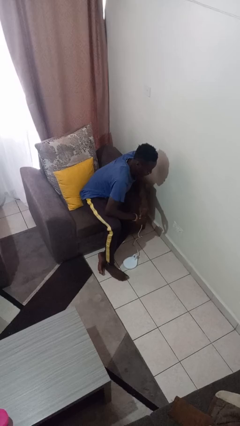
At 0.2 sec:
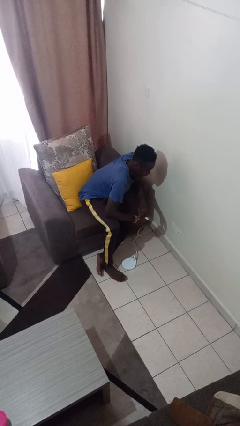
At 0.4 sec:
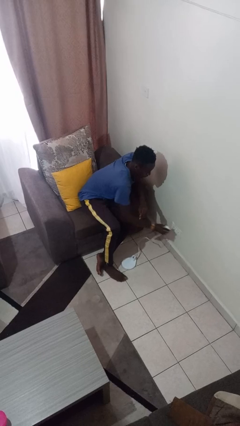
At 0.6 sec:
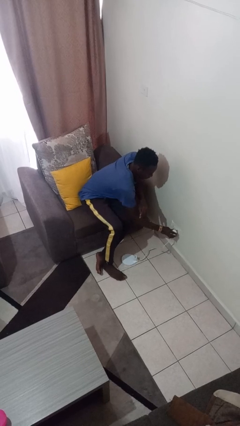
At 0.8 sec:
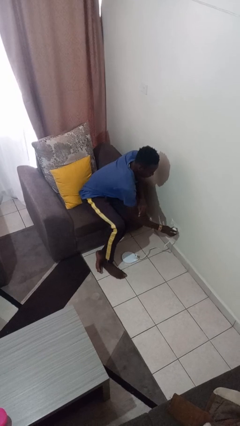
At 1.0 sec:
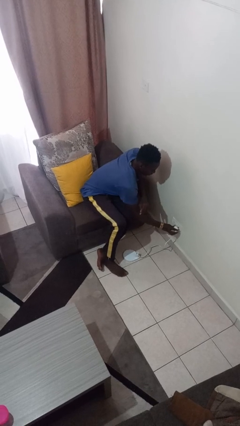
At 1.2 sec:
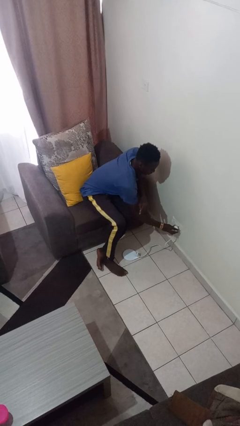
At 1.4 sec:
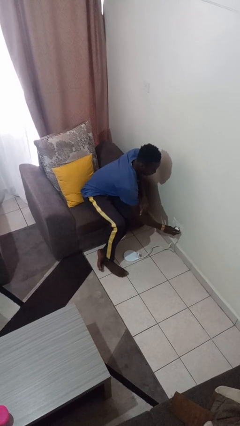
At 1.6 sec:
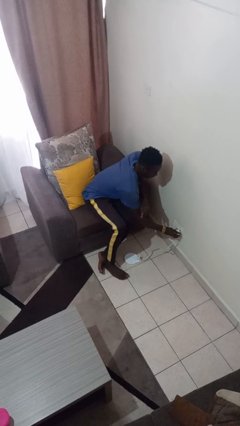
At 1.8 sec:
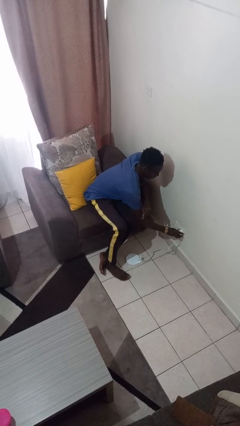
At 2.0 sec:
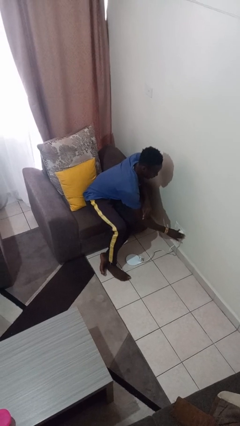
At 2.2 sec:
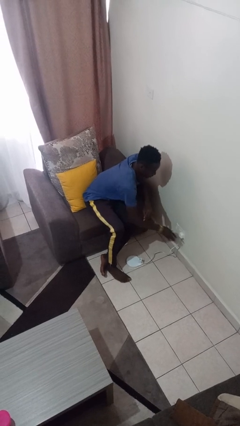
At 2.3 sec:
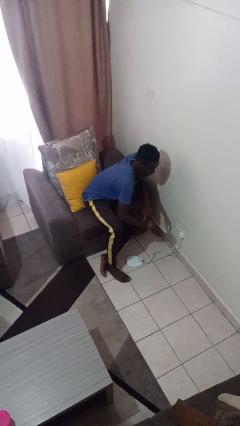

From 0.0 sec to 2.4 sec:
person plugs into electrical socket

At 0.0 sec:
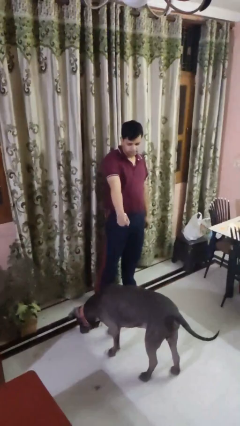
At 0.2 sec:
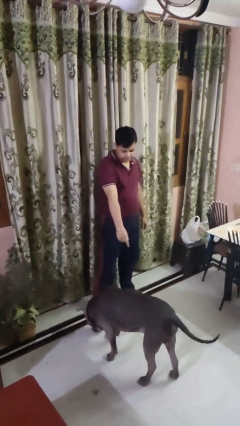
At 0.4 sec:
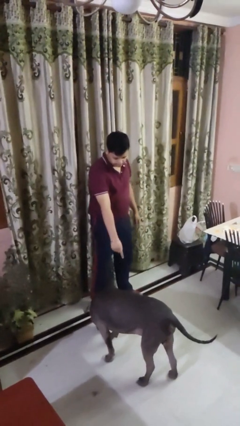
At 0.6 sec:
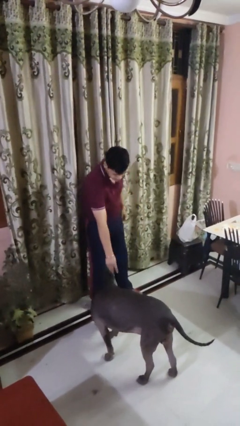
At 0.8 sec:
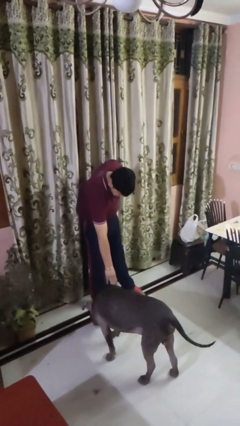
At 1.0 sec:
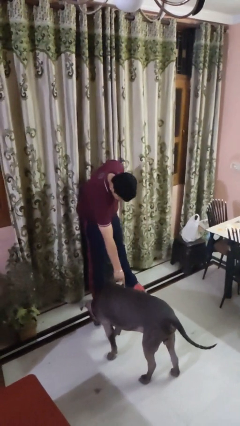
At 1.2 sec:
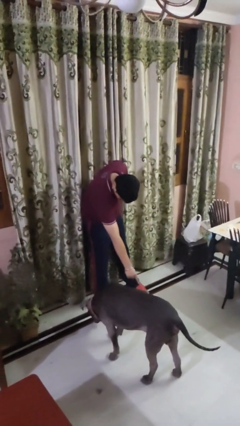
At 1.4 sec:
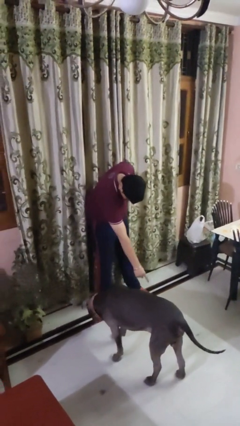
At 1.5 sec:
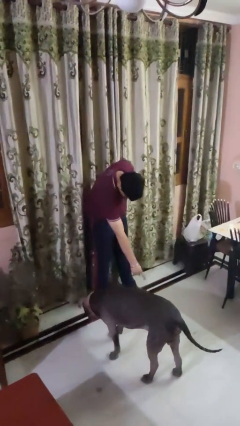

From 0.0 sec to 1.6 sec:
person points to dog

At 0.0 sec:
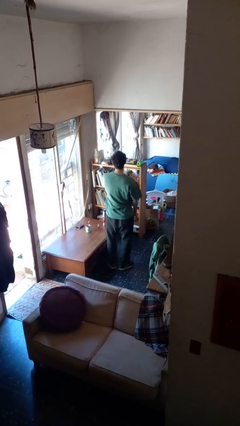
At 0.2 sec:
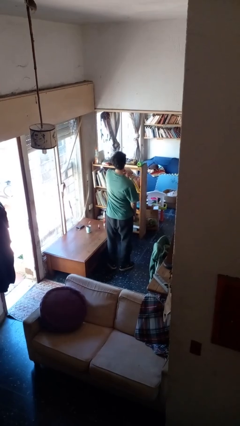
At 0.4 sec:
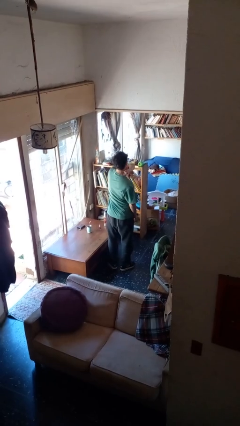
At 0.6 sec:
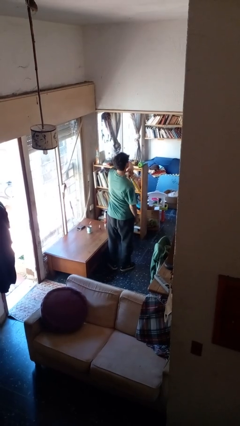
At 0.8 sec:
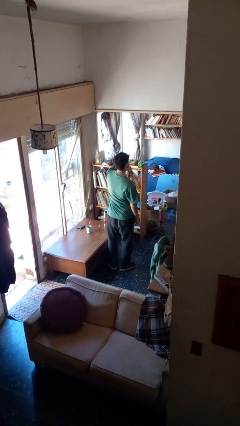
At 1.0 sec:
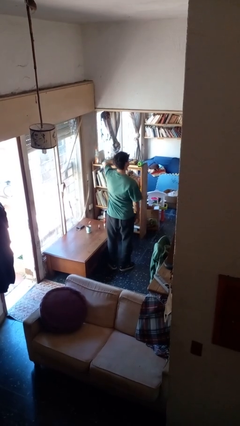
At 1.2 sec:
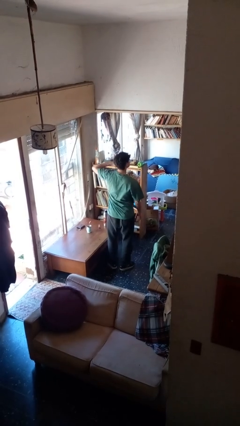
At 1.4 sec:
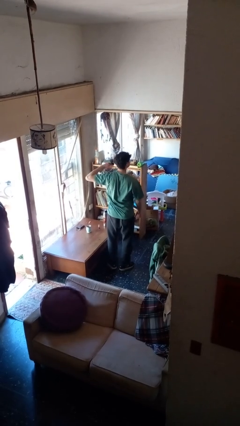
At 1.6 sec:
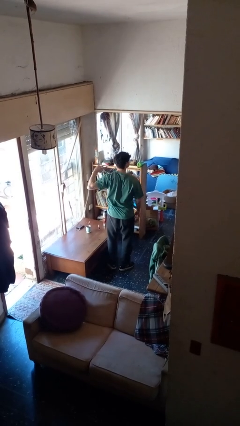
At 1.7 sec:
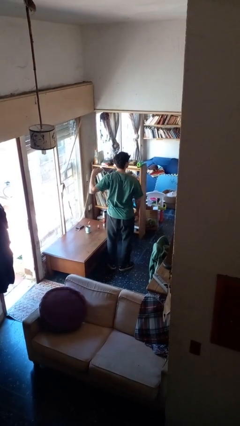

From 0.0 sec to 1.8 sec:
person gestures cut

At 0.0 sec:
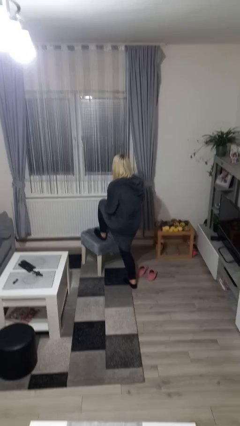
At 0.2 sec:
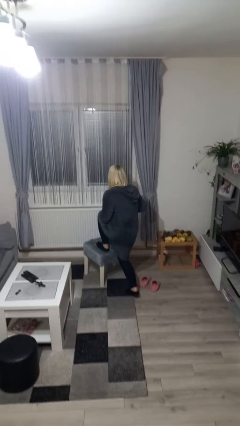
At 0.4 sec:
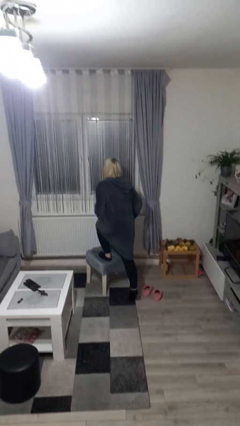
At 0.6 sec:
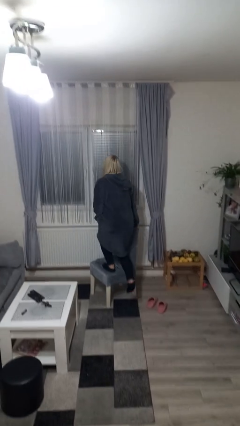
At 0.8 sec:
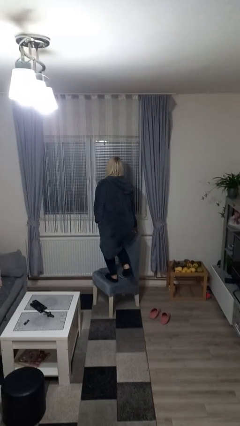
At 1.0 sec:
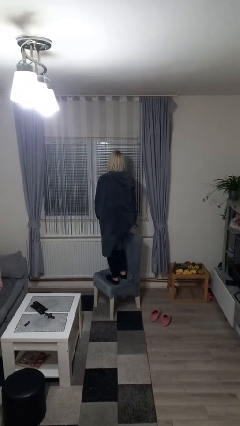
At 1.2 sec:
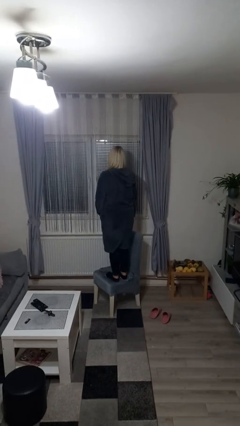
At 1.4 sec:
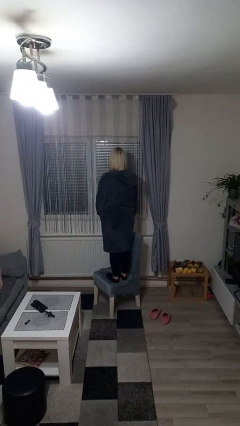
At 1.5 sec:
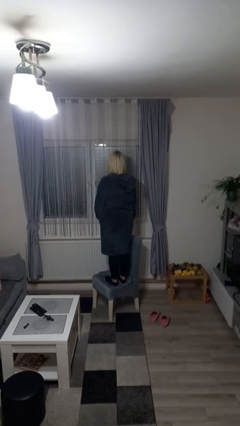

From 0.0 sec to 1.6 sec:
person climbs on chair

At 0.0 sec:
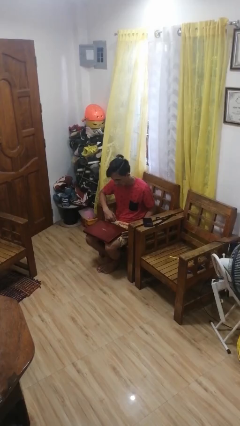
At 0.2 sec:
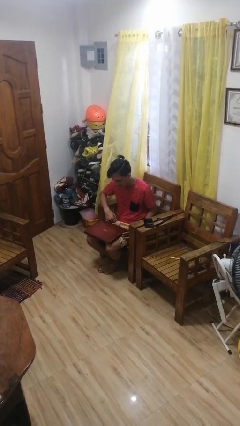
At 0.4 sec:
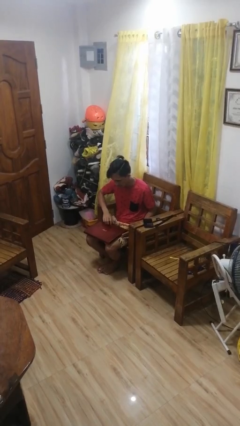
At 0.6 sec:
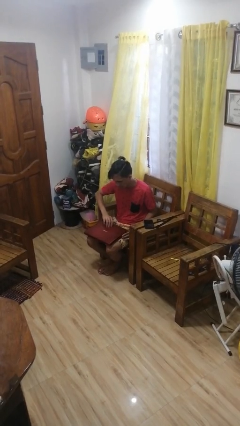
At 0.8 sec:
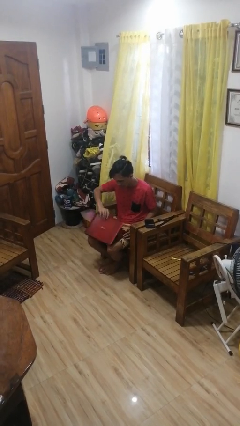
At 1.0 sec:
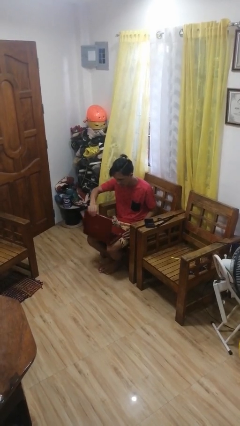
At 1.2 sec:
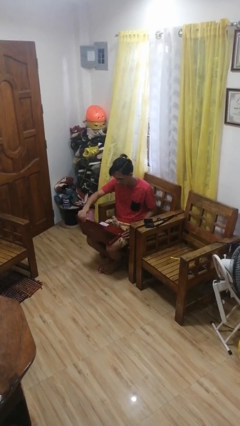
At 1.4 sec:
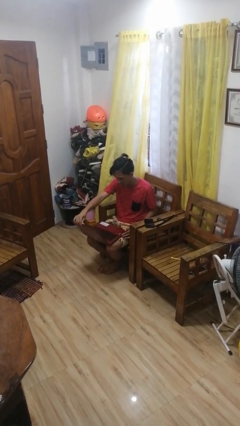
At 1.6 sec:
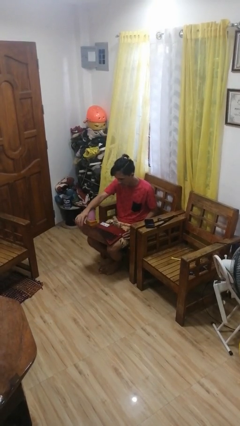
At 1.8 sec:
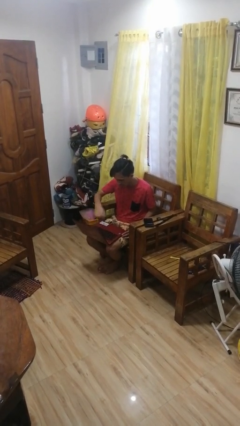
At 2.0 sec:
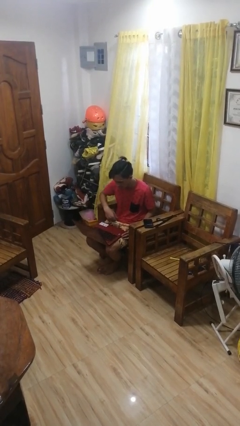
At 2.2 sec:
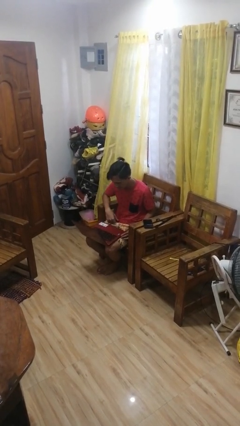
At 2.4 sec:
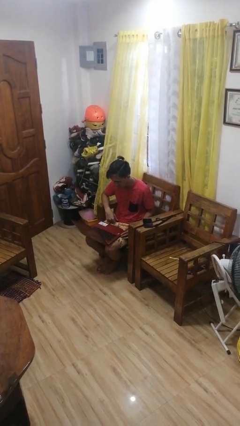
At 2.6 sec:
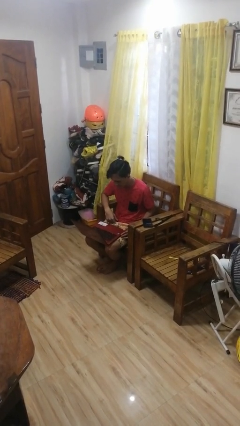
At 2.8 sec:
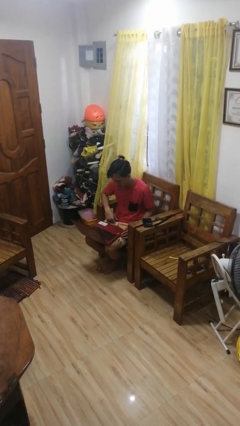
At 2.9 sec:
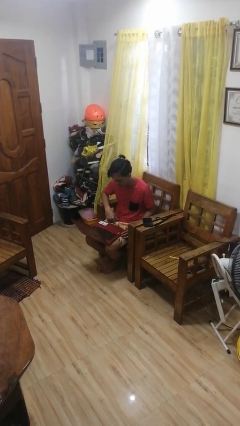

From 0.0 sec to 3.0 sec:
person opens laptop

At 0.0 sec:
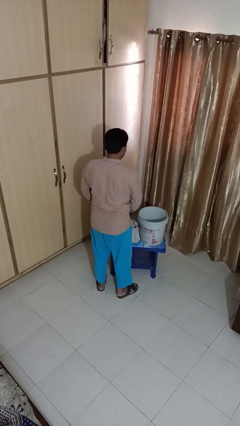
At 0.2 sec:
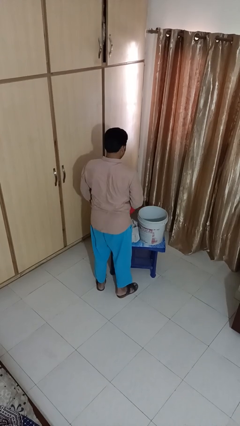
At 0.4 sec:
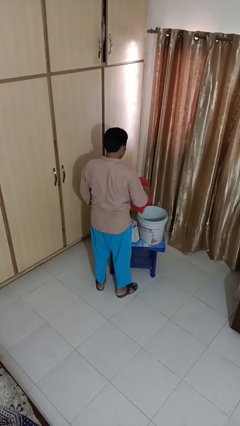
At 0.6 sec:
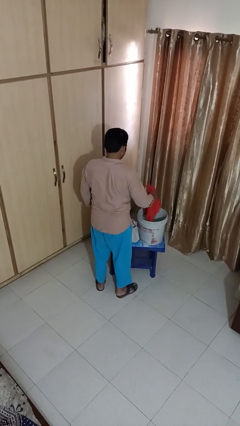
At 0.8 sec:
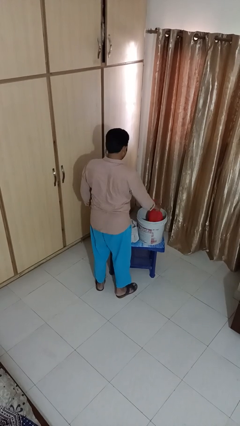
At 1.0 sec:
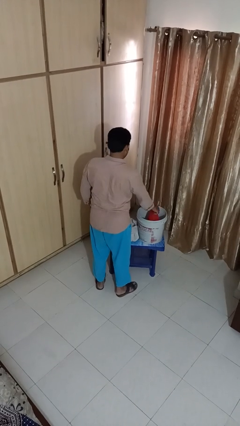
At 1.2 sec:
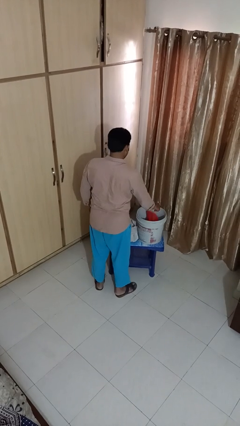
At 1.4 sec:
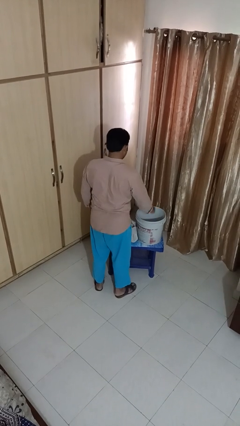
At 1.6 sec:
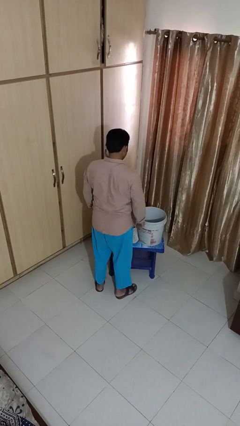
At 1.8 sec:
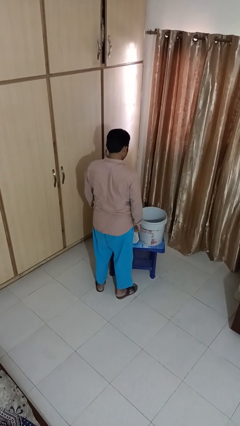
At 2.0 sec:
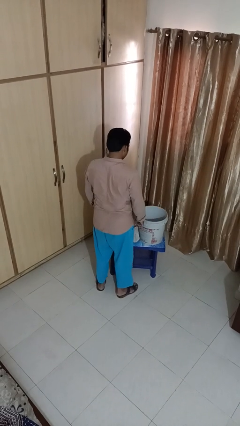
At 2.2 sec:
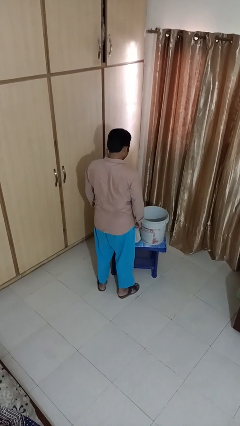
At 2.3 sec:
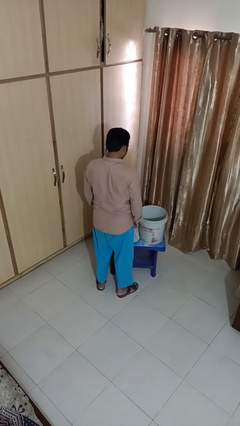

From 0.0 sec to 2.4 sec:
person puts object into basket

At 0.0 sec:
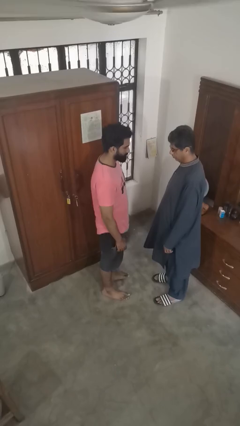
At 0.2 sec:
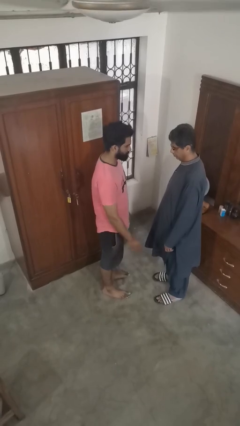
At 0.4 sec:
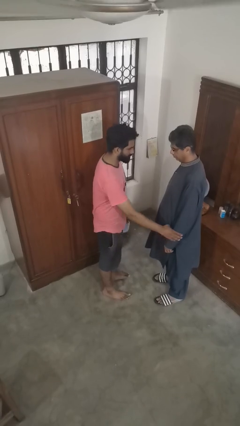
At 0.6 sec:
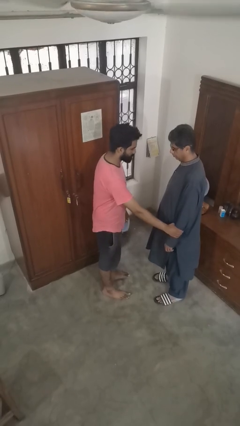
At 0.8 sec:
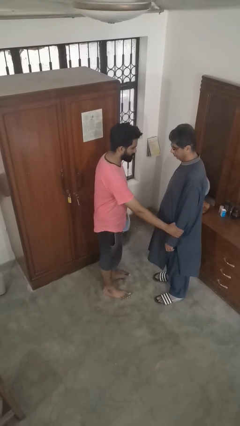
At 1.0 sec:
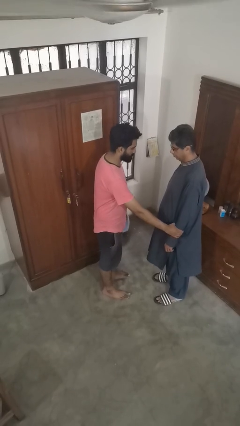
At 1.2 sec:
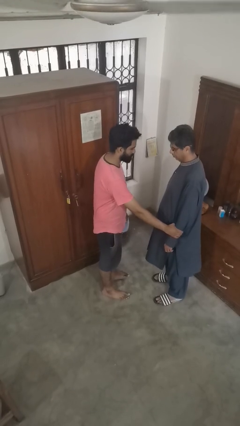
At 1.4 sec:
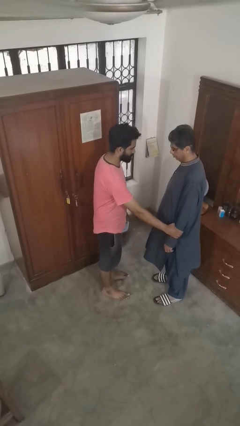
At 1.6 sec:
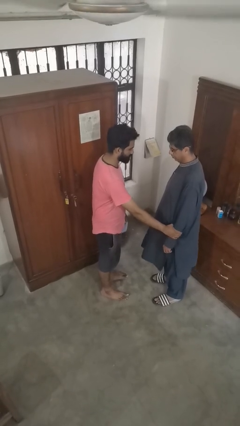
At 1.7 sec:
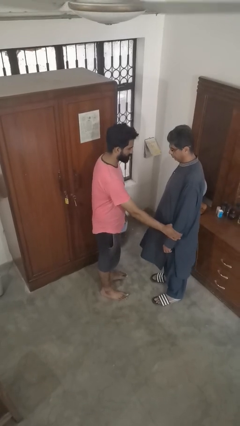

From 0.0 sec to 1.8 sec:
person grabs person by forearm

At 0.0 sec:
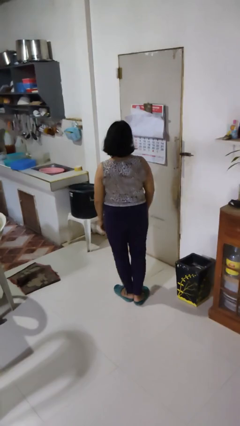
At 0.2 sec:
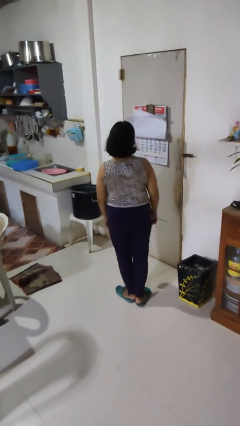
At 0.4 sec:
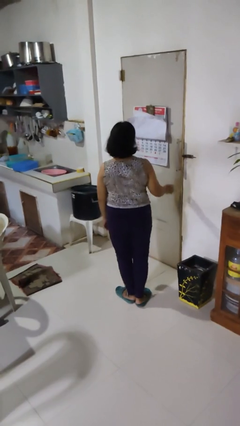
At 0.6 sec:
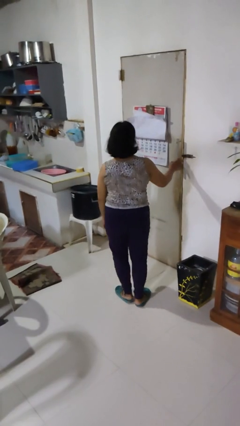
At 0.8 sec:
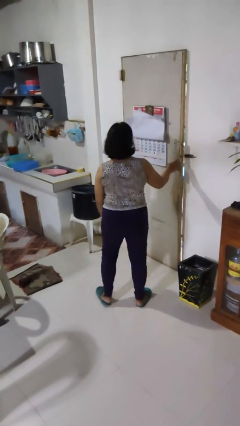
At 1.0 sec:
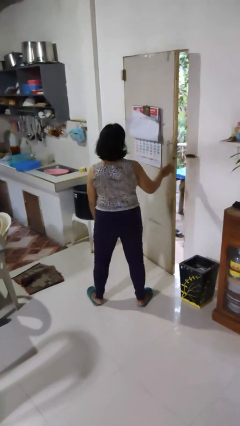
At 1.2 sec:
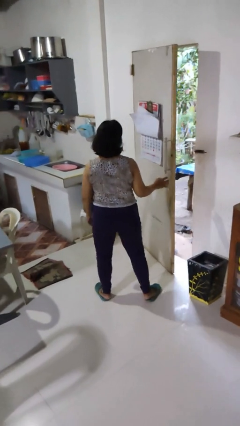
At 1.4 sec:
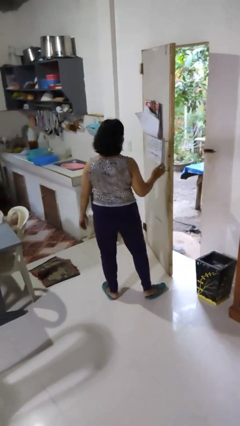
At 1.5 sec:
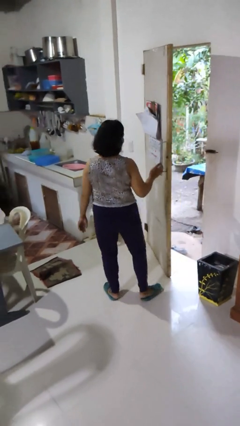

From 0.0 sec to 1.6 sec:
person opens facility door

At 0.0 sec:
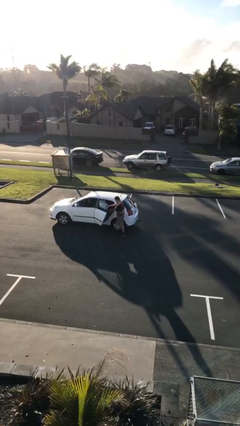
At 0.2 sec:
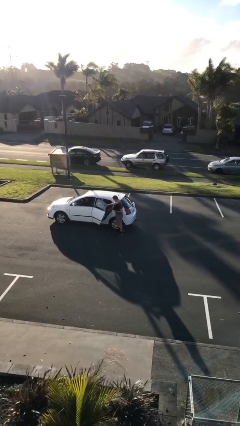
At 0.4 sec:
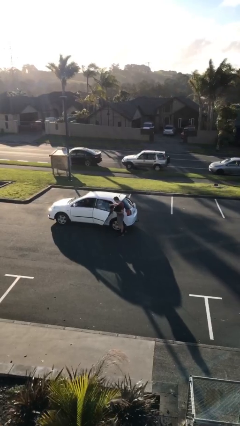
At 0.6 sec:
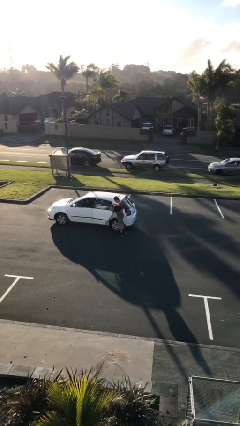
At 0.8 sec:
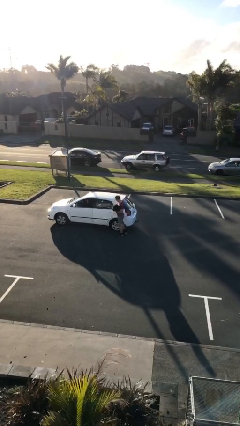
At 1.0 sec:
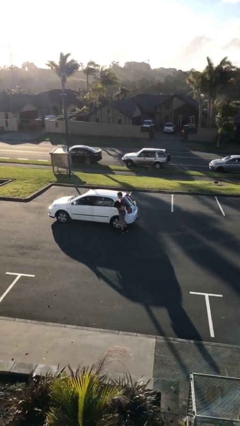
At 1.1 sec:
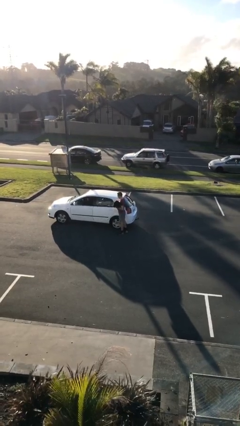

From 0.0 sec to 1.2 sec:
person closes car door
